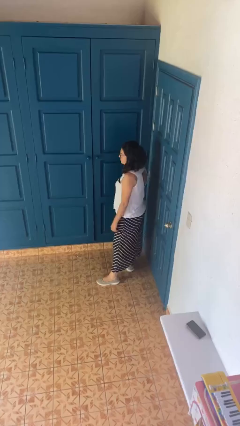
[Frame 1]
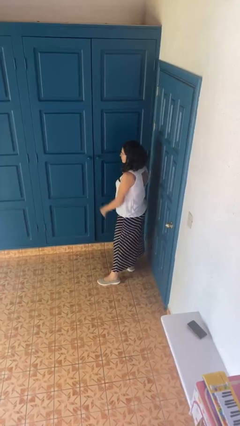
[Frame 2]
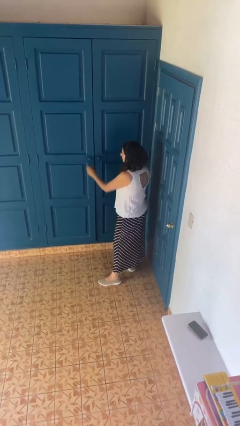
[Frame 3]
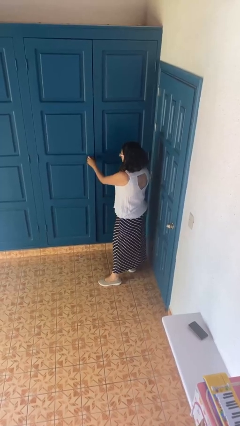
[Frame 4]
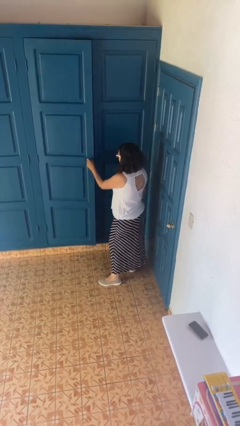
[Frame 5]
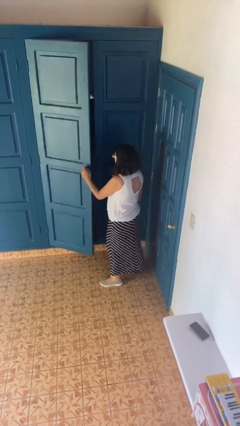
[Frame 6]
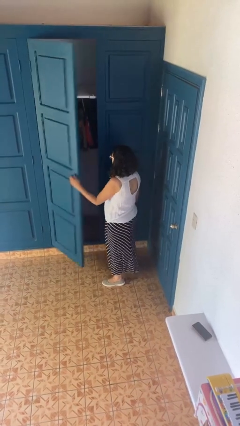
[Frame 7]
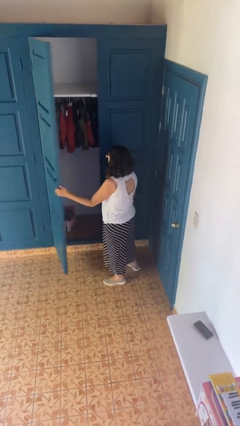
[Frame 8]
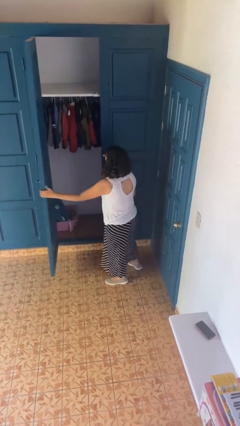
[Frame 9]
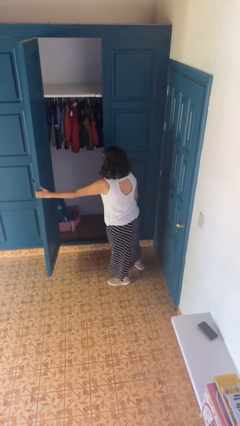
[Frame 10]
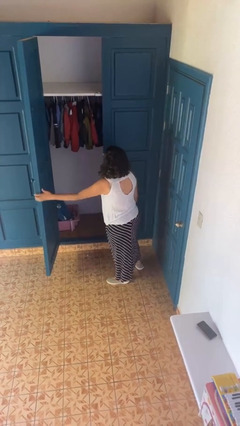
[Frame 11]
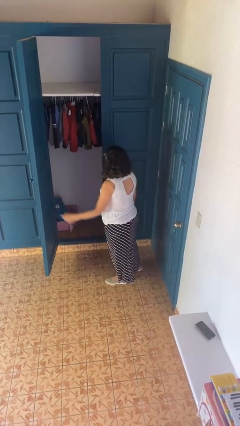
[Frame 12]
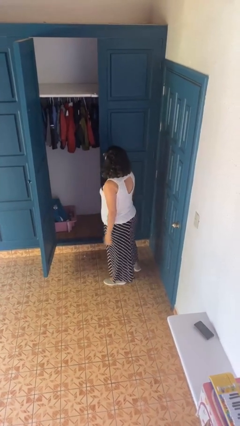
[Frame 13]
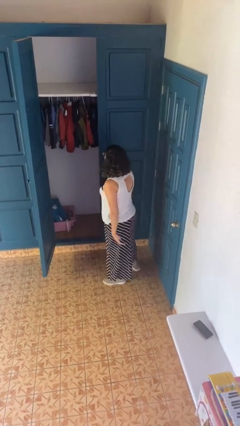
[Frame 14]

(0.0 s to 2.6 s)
person opens closet door

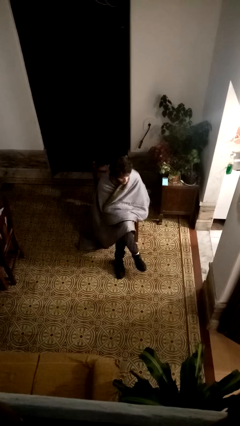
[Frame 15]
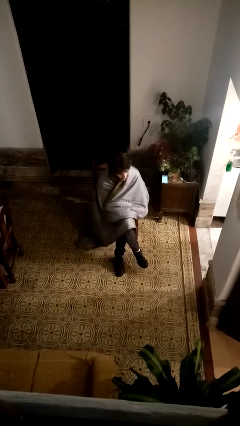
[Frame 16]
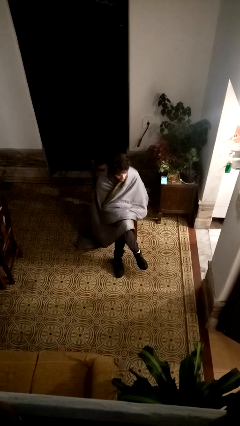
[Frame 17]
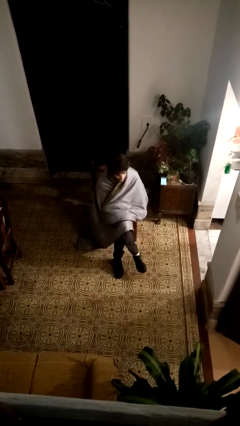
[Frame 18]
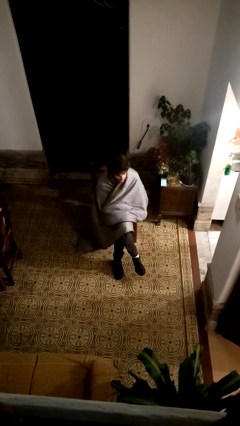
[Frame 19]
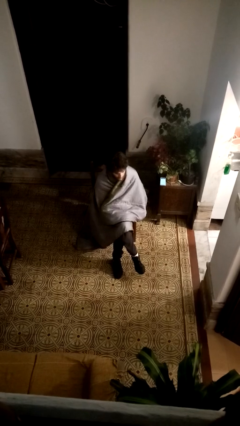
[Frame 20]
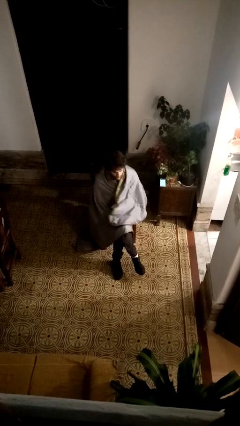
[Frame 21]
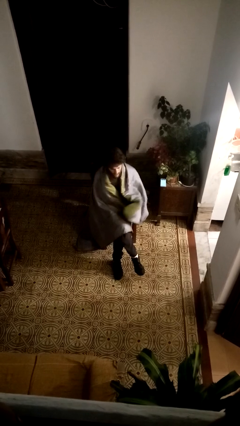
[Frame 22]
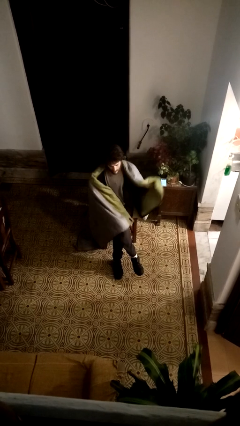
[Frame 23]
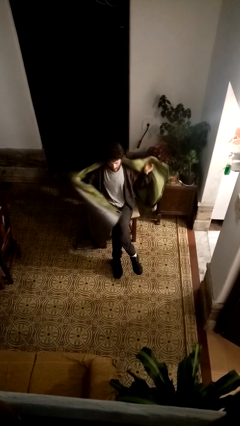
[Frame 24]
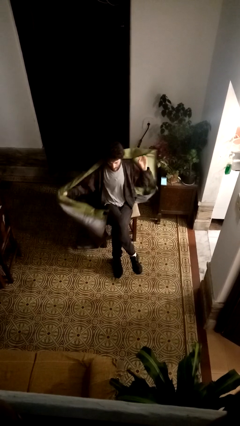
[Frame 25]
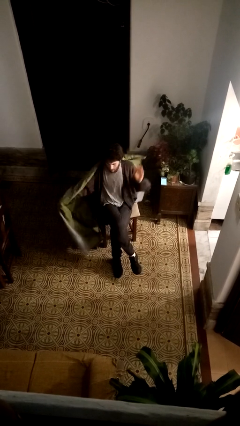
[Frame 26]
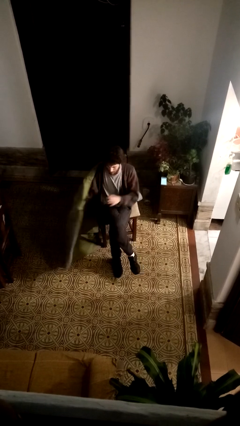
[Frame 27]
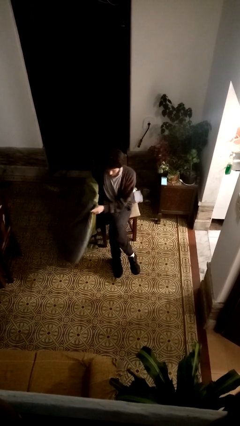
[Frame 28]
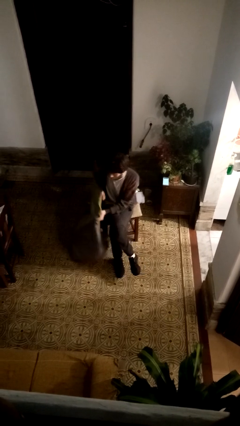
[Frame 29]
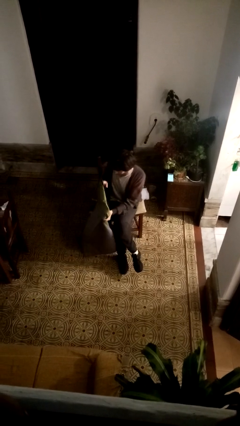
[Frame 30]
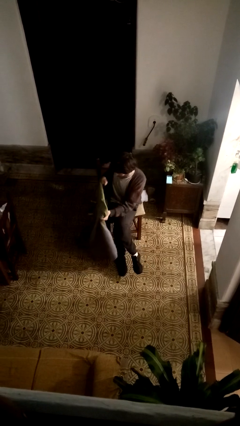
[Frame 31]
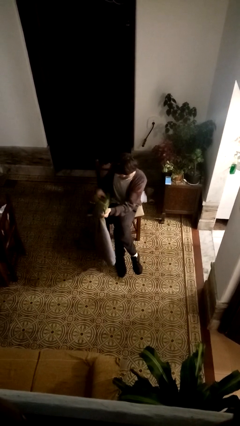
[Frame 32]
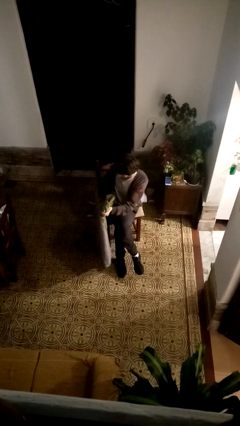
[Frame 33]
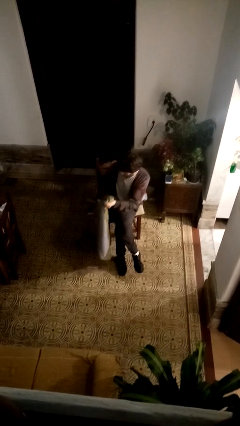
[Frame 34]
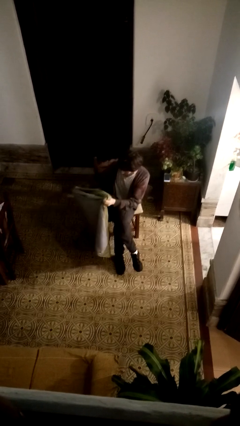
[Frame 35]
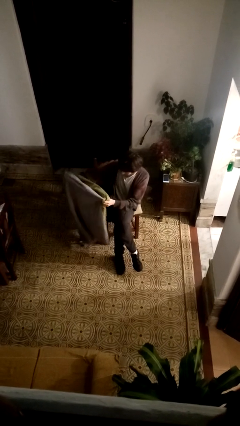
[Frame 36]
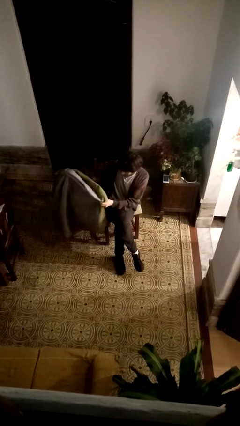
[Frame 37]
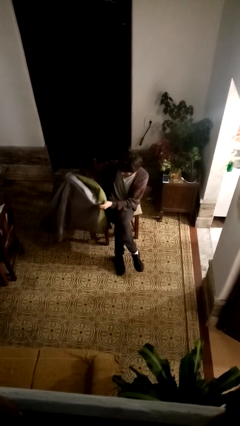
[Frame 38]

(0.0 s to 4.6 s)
person uncovers with blanket

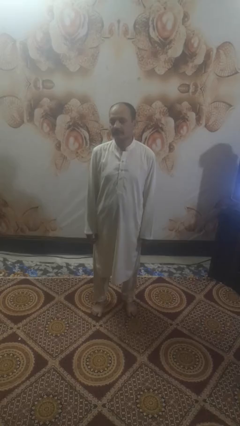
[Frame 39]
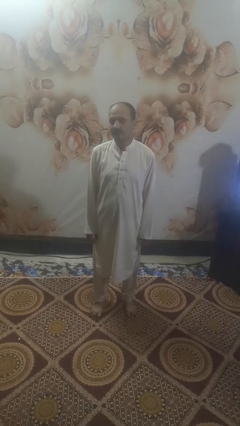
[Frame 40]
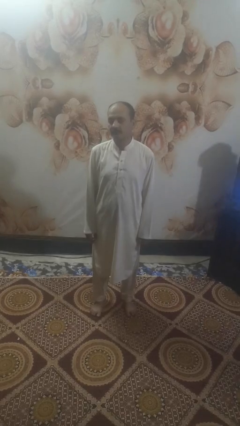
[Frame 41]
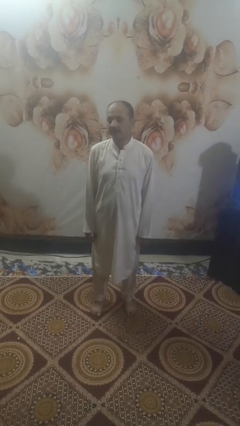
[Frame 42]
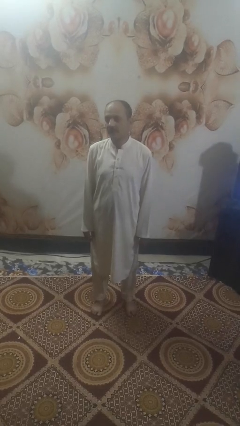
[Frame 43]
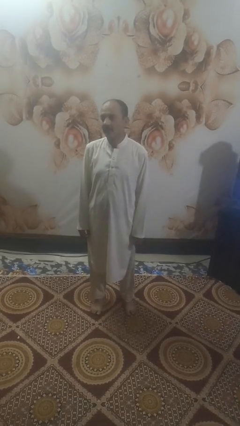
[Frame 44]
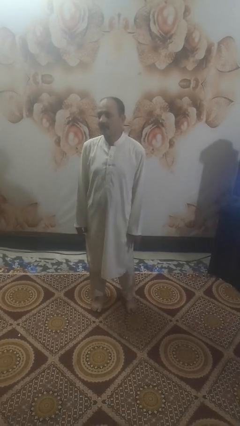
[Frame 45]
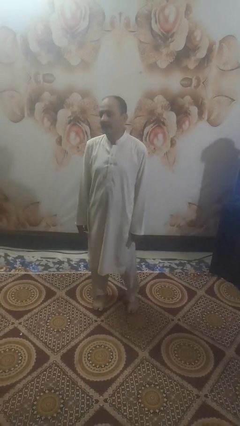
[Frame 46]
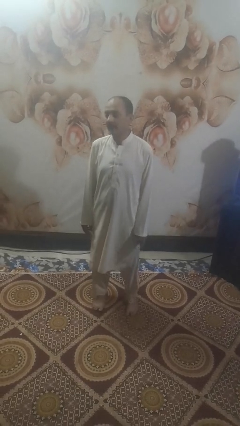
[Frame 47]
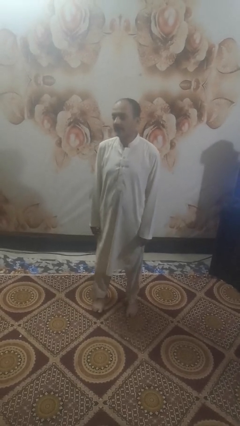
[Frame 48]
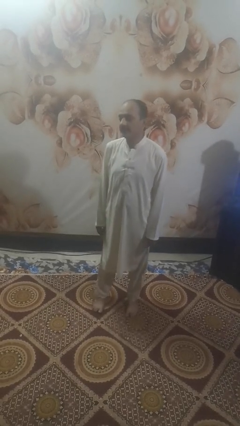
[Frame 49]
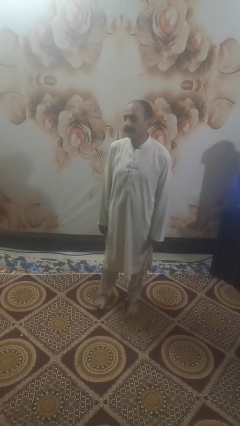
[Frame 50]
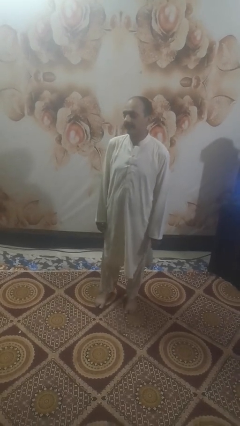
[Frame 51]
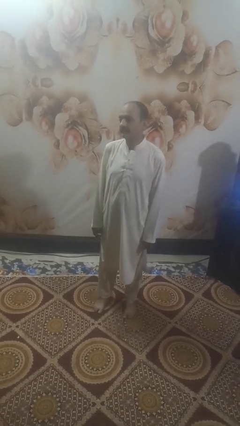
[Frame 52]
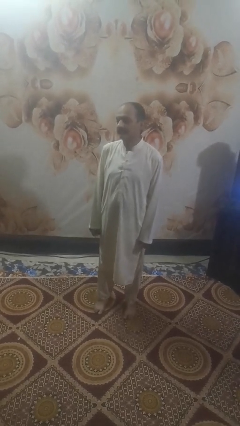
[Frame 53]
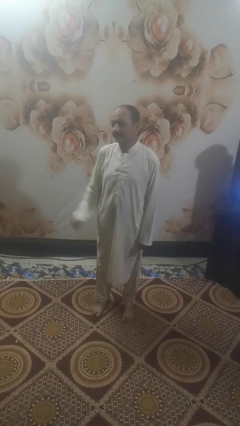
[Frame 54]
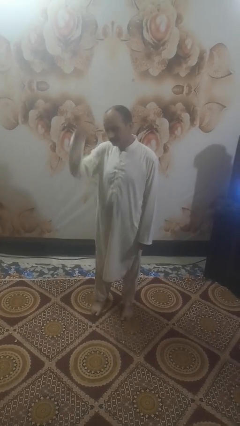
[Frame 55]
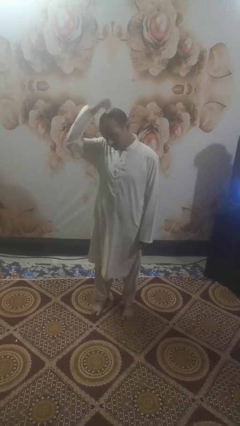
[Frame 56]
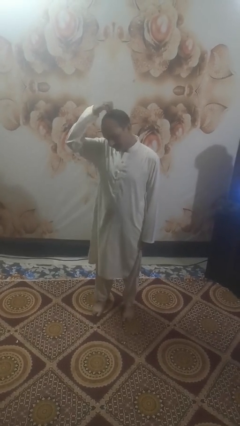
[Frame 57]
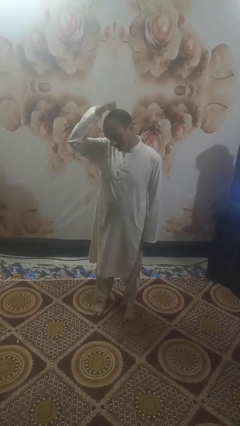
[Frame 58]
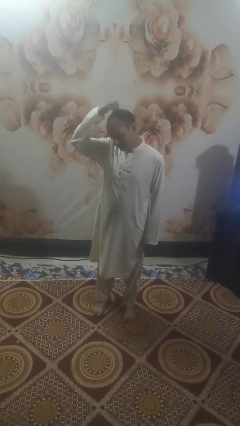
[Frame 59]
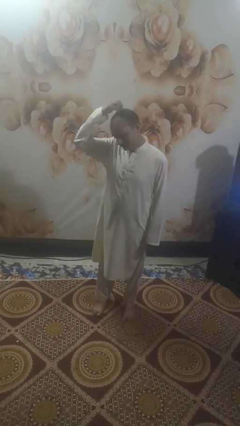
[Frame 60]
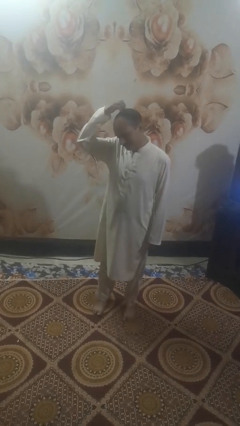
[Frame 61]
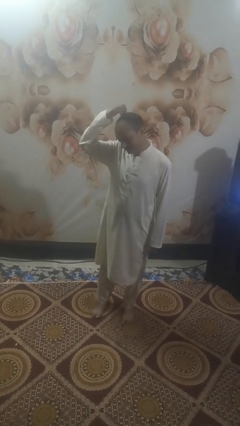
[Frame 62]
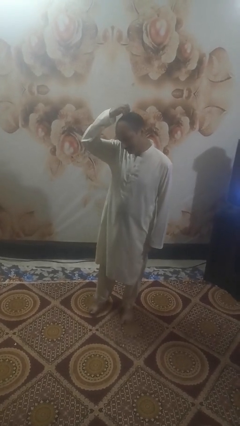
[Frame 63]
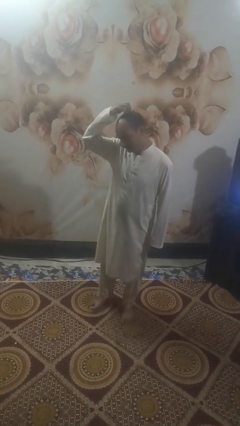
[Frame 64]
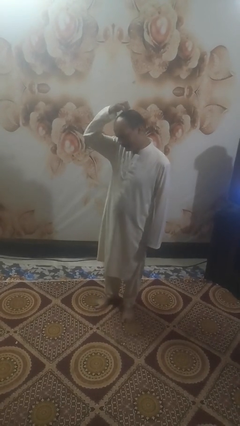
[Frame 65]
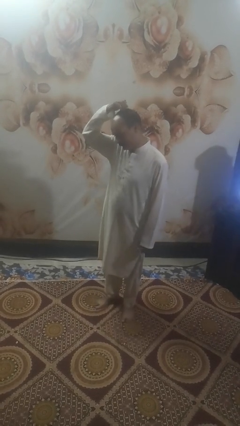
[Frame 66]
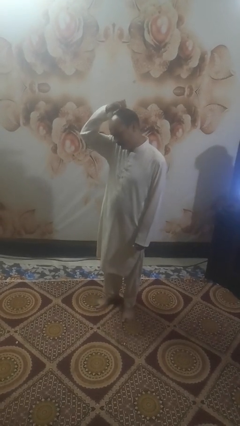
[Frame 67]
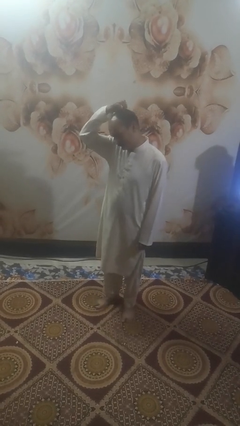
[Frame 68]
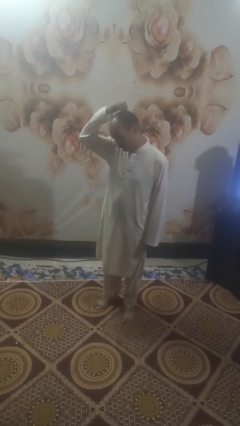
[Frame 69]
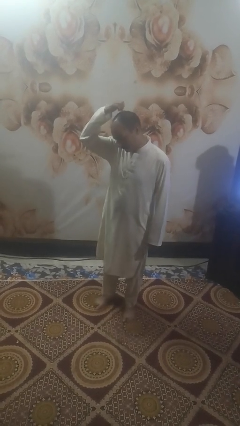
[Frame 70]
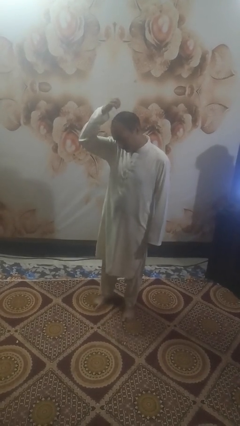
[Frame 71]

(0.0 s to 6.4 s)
person scratches face

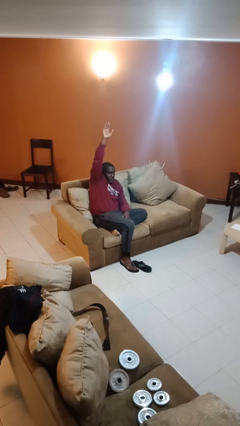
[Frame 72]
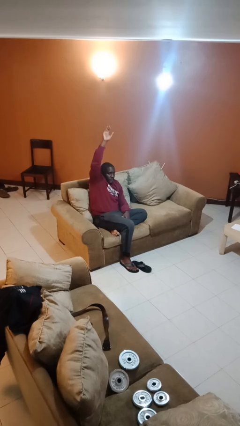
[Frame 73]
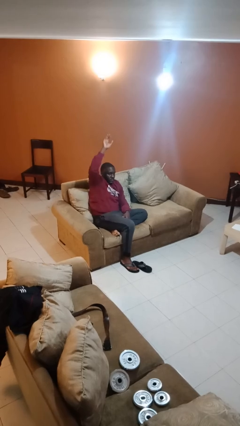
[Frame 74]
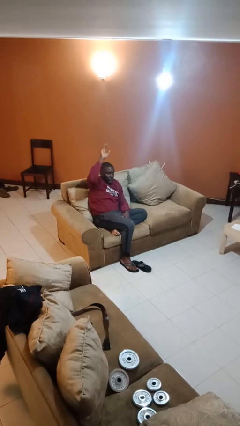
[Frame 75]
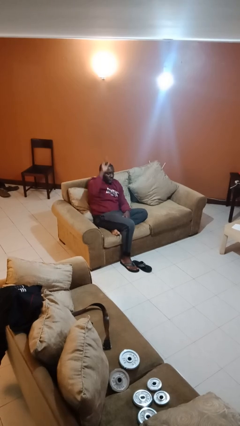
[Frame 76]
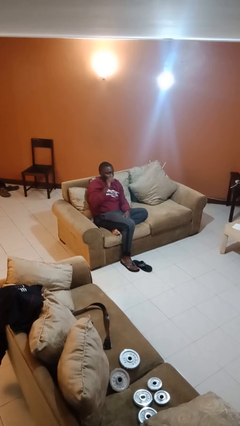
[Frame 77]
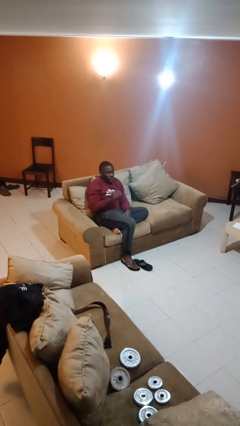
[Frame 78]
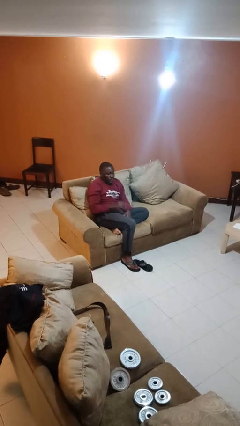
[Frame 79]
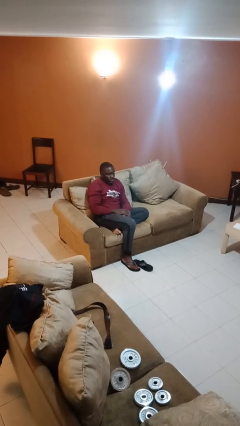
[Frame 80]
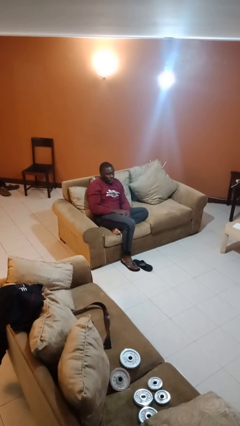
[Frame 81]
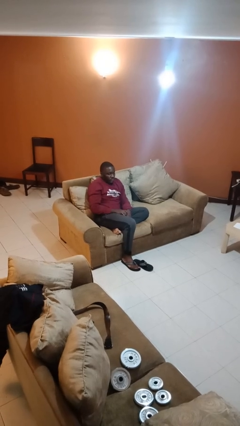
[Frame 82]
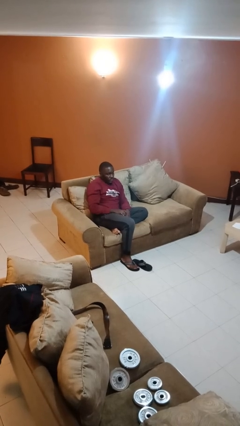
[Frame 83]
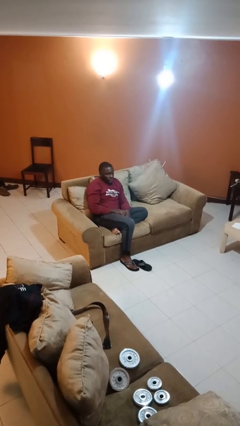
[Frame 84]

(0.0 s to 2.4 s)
person gestures lower hand

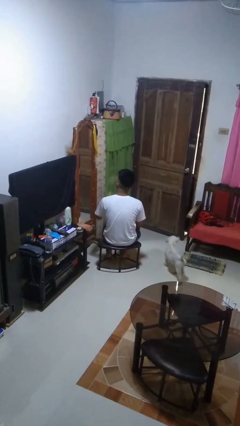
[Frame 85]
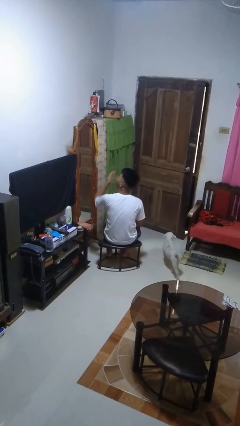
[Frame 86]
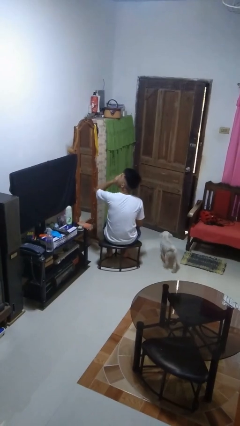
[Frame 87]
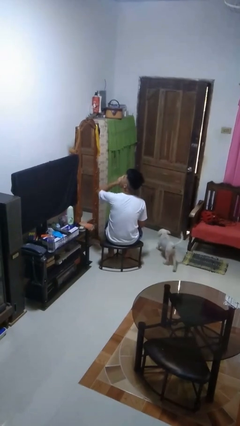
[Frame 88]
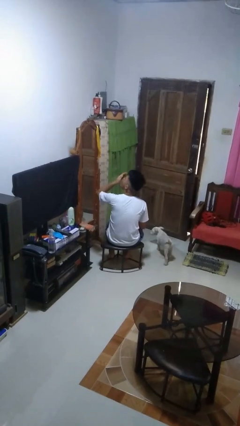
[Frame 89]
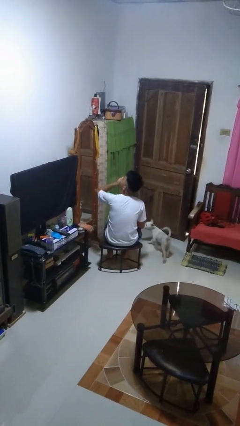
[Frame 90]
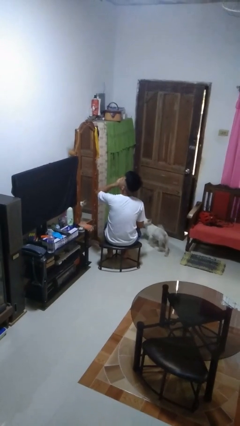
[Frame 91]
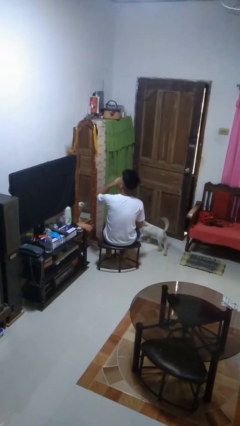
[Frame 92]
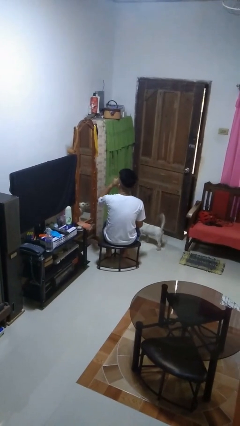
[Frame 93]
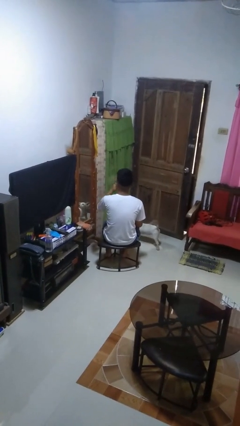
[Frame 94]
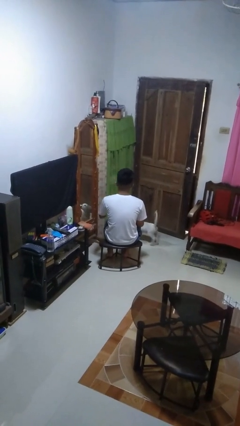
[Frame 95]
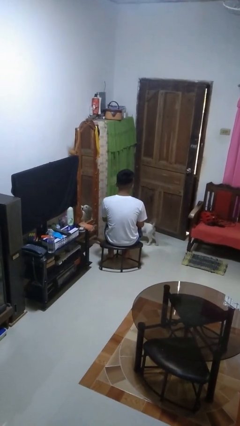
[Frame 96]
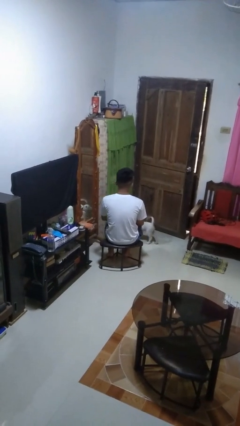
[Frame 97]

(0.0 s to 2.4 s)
person yawns
